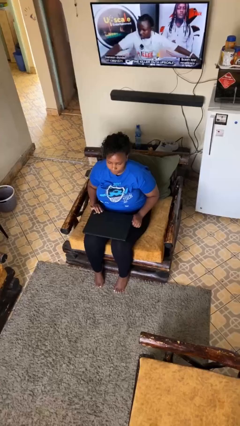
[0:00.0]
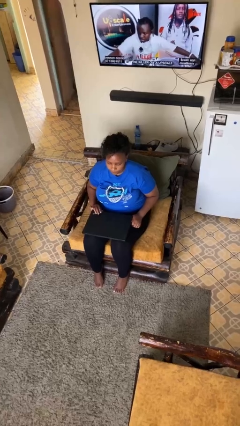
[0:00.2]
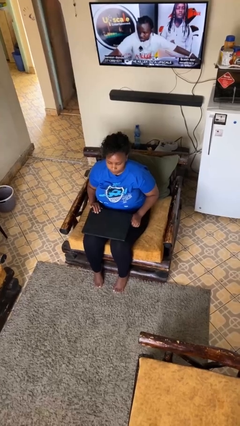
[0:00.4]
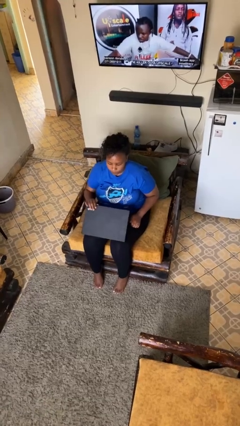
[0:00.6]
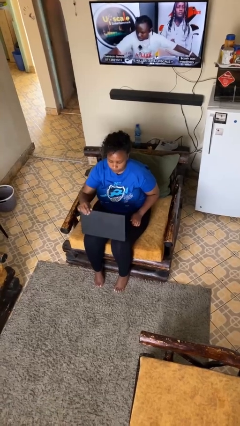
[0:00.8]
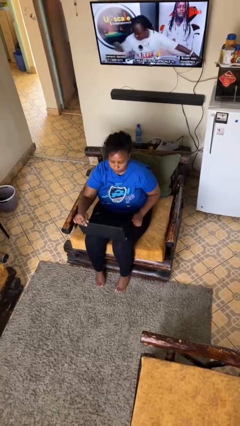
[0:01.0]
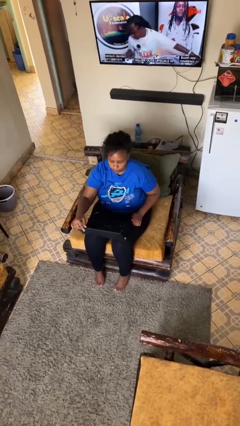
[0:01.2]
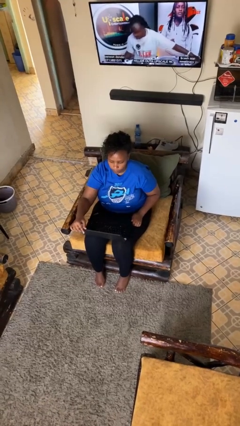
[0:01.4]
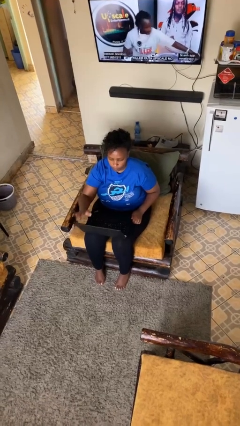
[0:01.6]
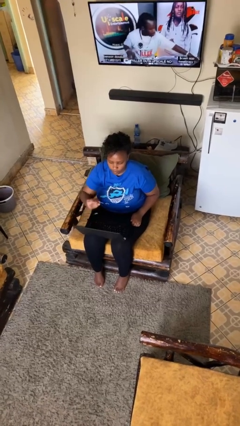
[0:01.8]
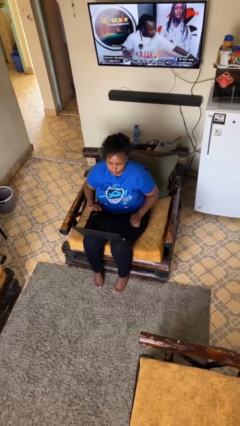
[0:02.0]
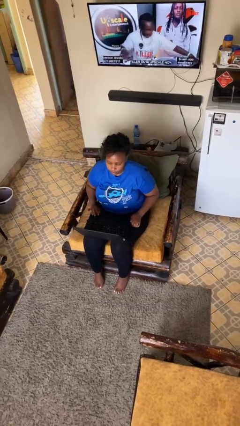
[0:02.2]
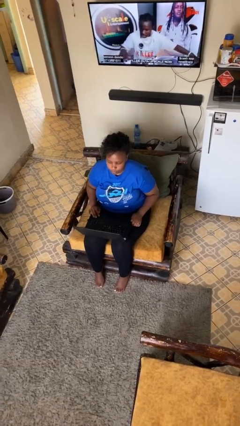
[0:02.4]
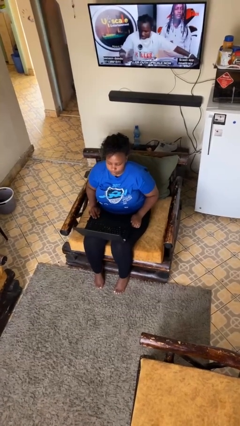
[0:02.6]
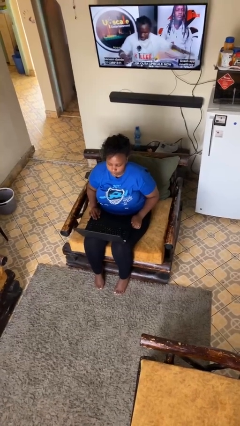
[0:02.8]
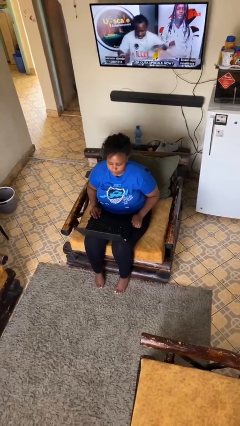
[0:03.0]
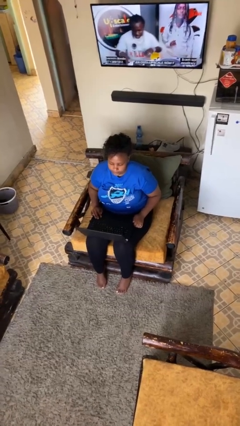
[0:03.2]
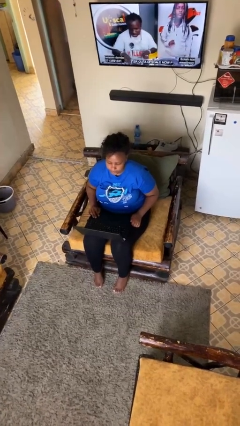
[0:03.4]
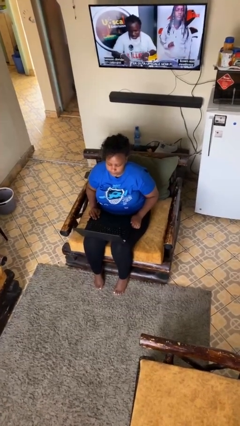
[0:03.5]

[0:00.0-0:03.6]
person opens laptop

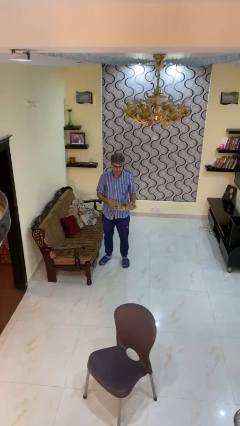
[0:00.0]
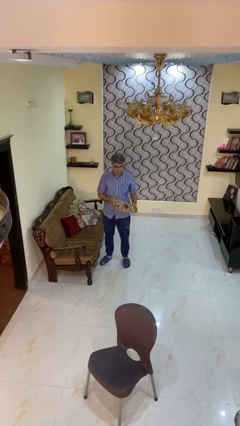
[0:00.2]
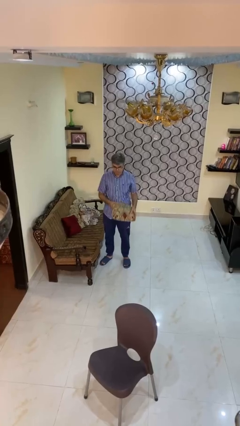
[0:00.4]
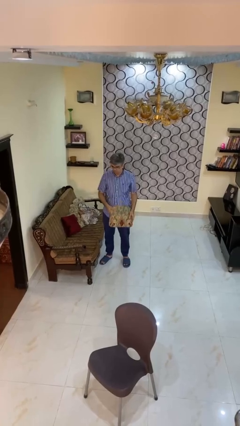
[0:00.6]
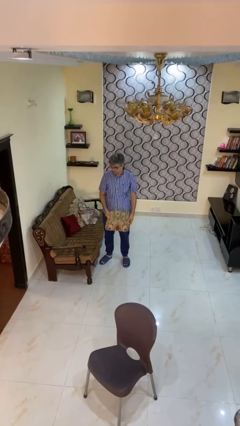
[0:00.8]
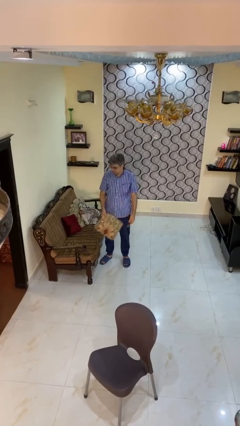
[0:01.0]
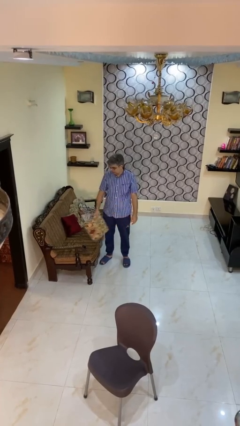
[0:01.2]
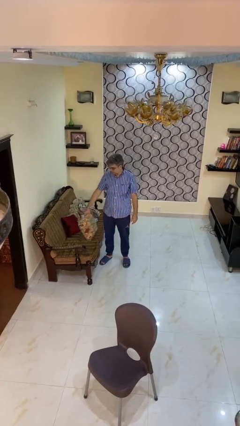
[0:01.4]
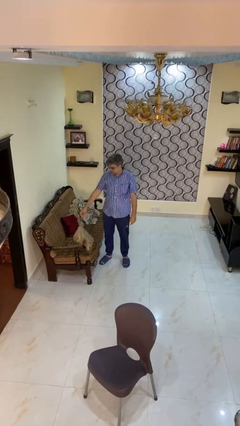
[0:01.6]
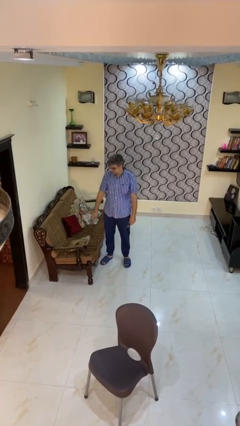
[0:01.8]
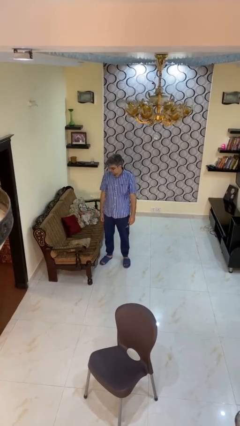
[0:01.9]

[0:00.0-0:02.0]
person puts down object on couch

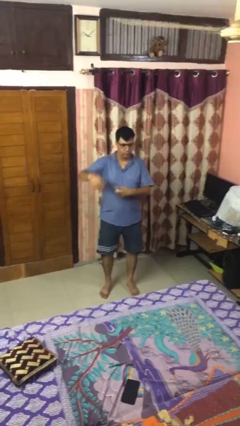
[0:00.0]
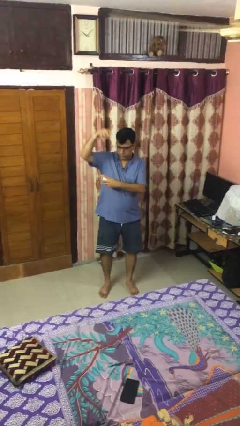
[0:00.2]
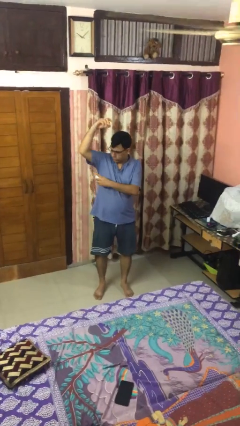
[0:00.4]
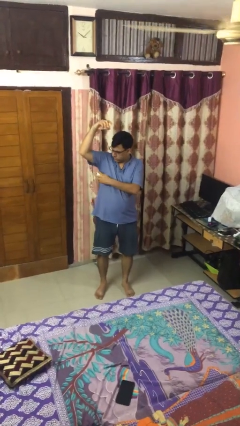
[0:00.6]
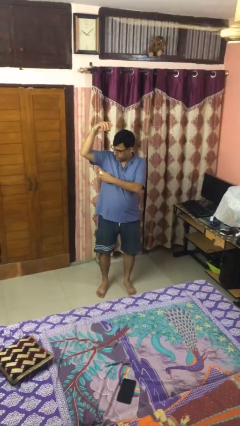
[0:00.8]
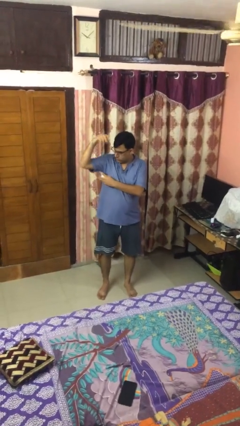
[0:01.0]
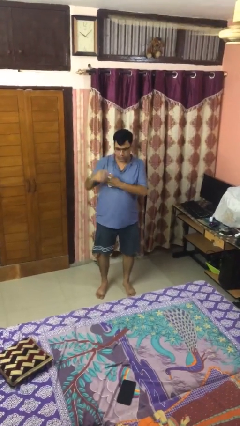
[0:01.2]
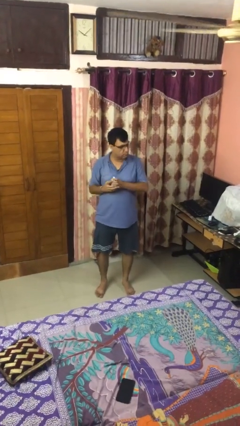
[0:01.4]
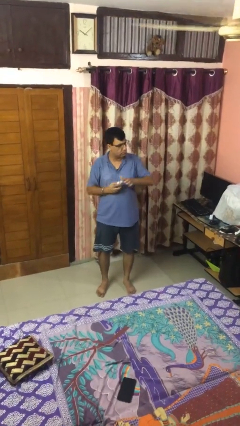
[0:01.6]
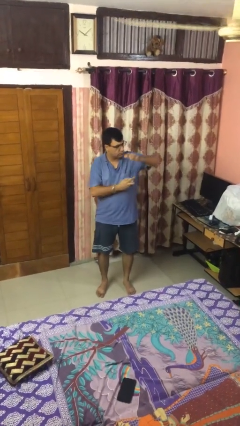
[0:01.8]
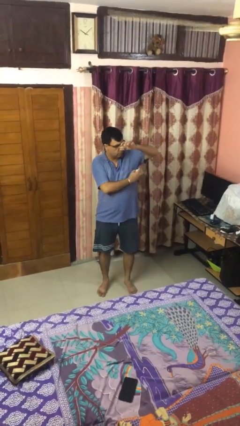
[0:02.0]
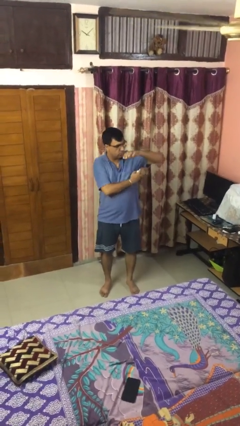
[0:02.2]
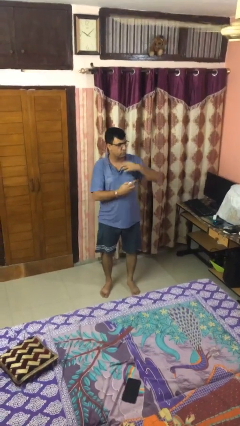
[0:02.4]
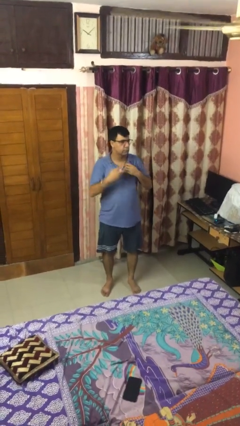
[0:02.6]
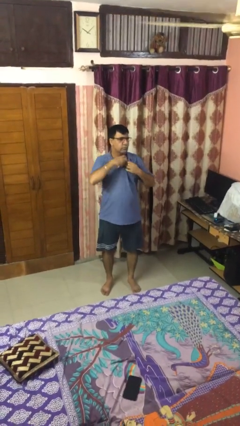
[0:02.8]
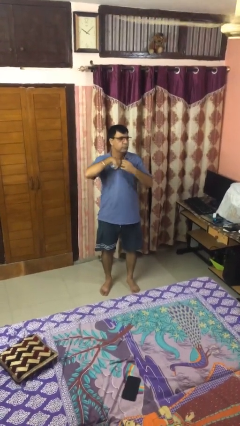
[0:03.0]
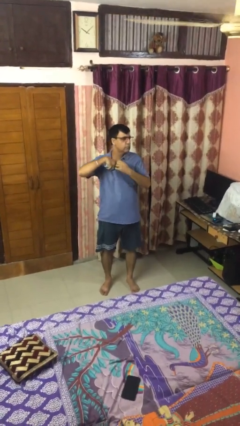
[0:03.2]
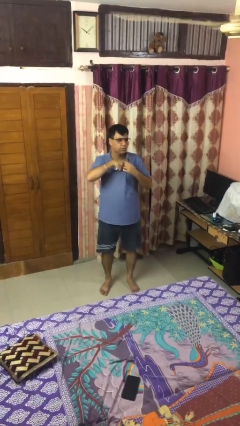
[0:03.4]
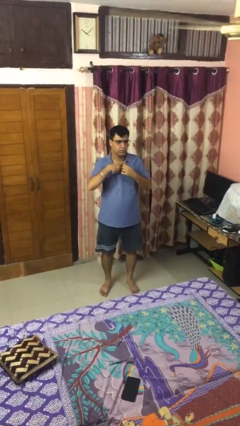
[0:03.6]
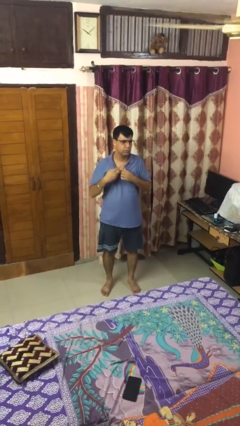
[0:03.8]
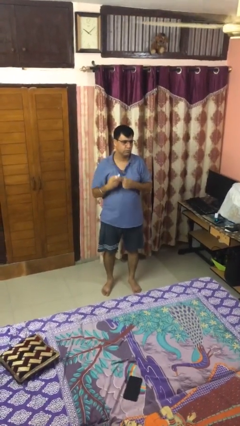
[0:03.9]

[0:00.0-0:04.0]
person applies deodorant

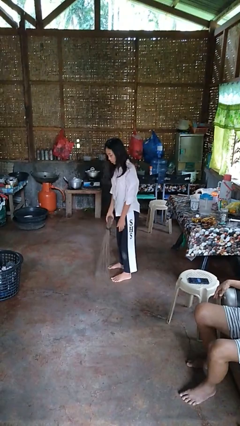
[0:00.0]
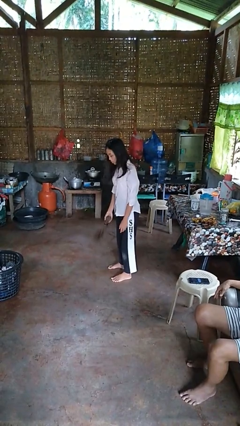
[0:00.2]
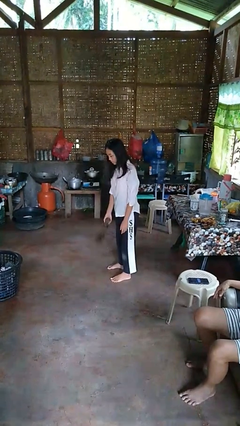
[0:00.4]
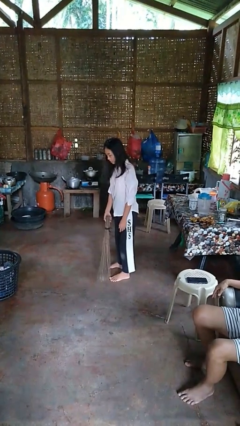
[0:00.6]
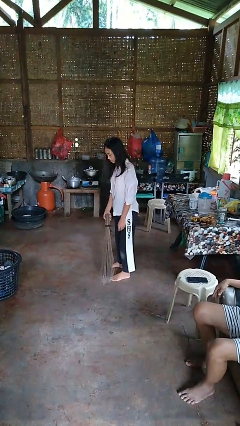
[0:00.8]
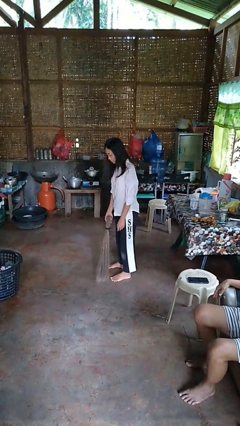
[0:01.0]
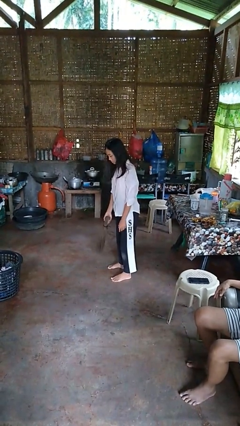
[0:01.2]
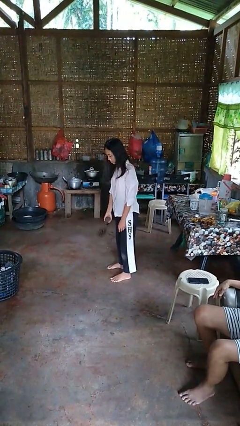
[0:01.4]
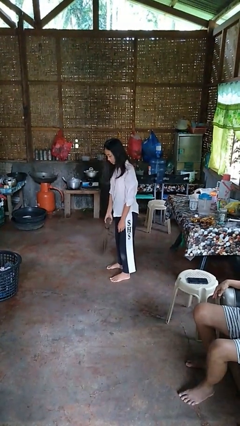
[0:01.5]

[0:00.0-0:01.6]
person sweeps floor

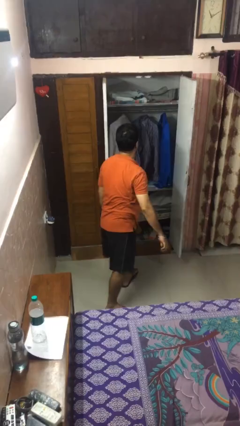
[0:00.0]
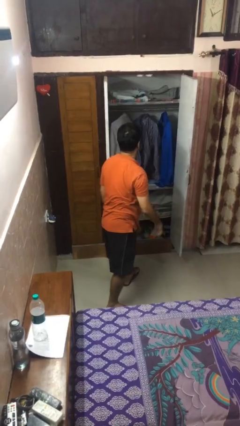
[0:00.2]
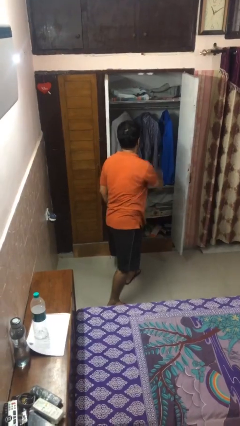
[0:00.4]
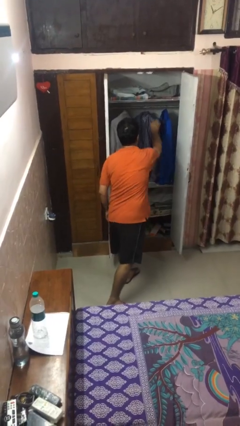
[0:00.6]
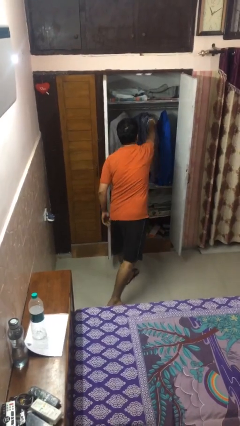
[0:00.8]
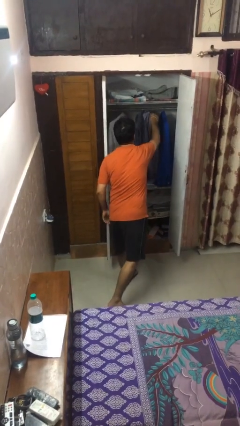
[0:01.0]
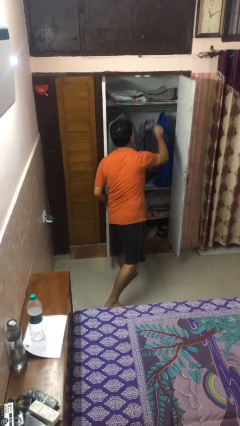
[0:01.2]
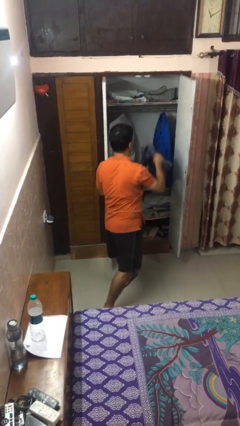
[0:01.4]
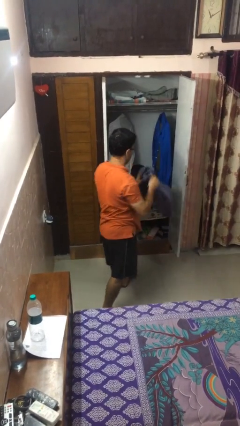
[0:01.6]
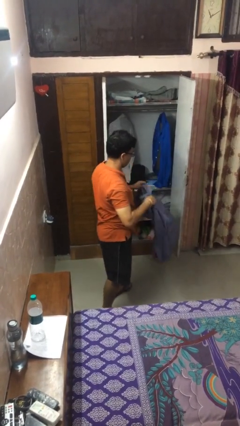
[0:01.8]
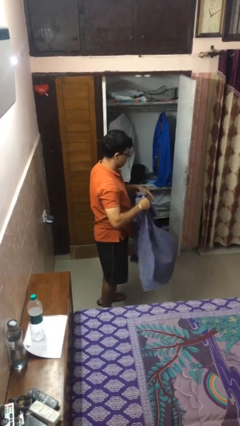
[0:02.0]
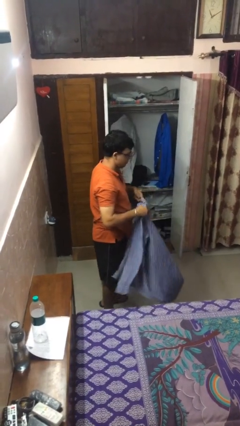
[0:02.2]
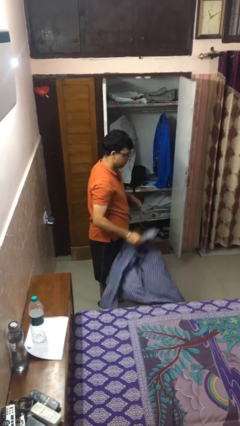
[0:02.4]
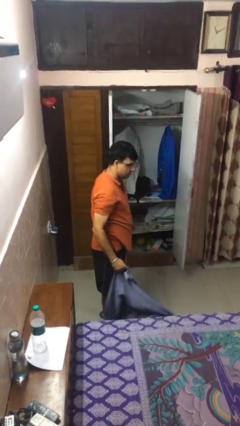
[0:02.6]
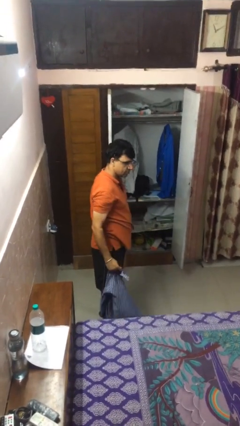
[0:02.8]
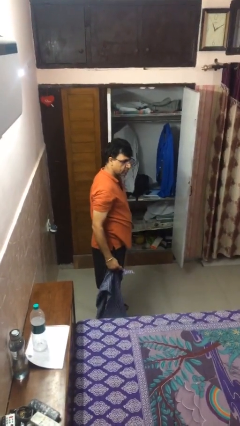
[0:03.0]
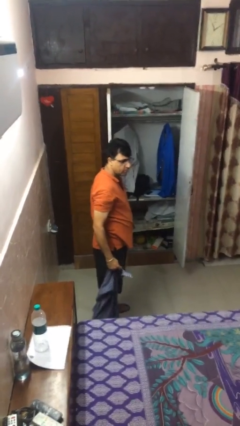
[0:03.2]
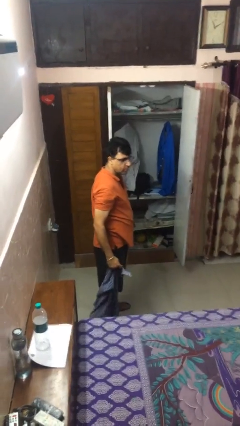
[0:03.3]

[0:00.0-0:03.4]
person takes clothes from closet

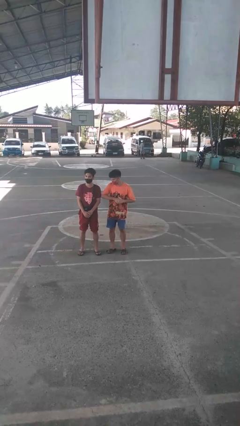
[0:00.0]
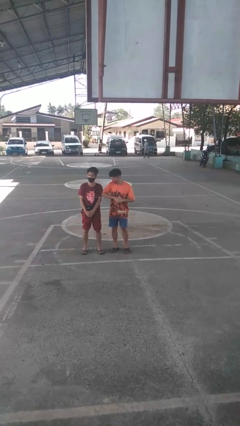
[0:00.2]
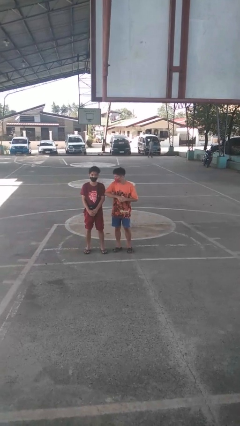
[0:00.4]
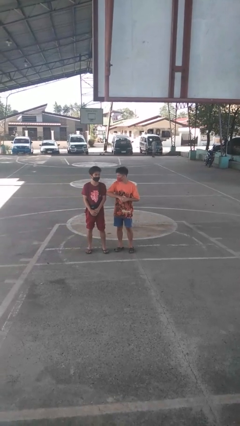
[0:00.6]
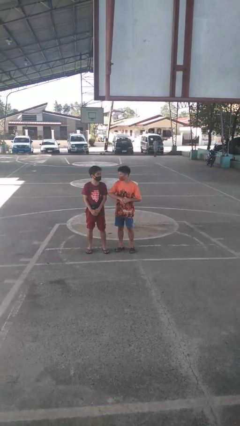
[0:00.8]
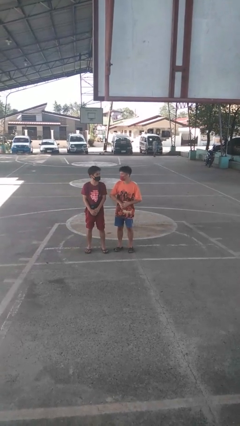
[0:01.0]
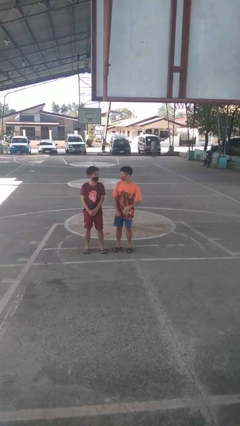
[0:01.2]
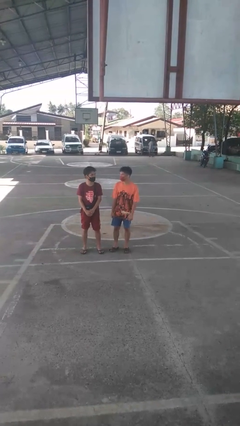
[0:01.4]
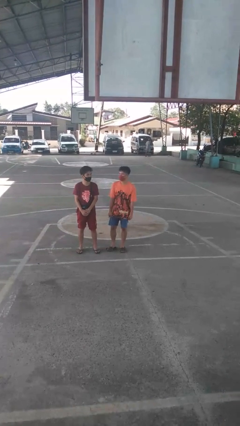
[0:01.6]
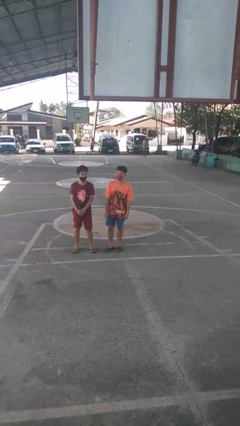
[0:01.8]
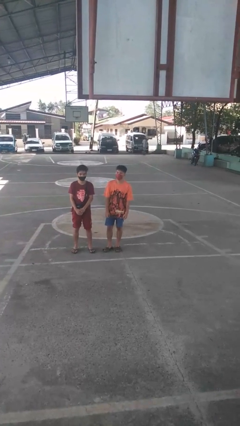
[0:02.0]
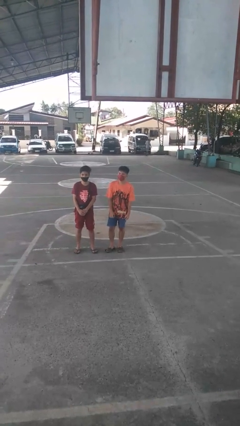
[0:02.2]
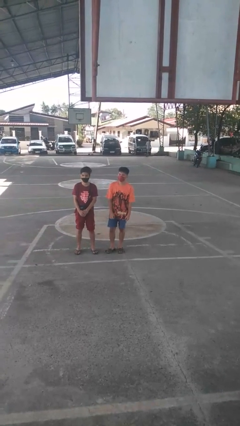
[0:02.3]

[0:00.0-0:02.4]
person nudges person with elbow
